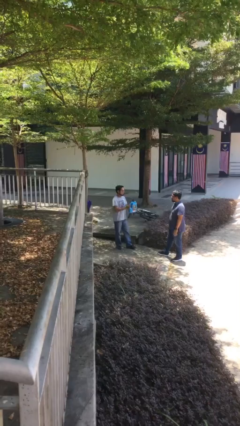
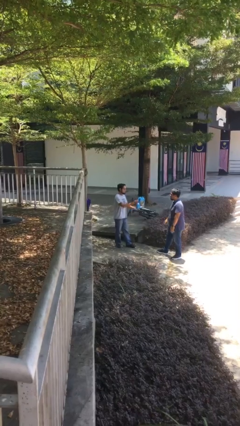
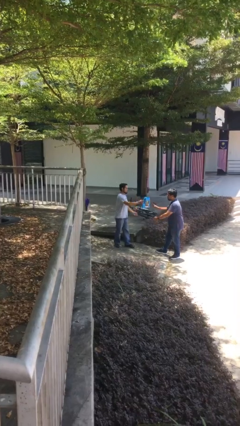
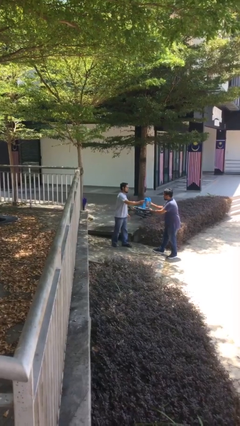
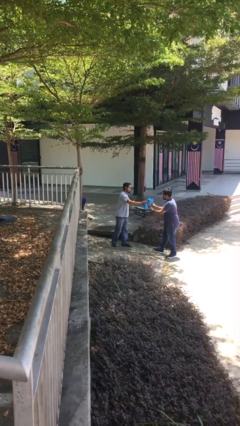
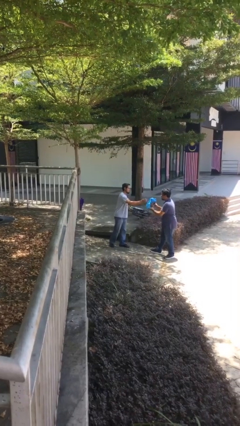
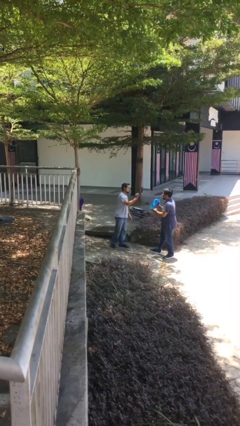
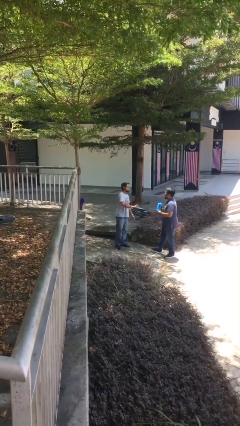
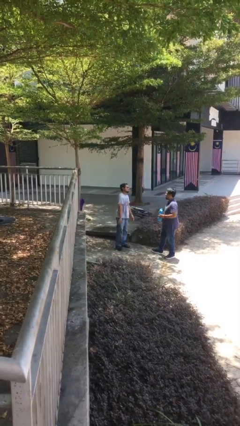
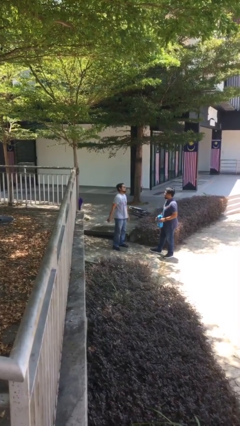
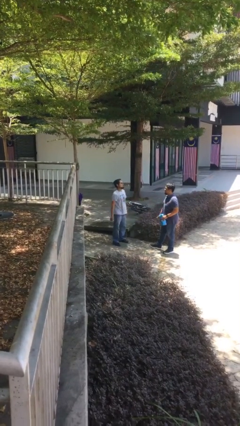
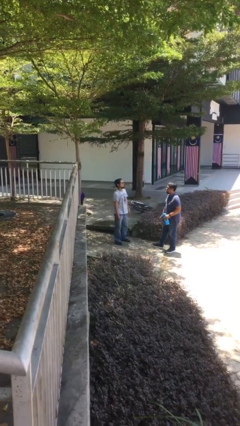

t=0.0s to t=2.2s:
person transfers object to person

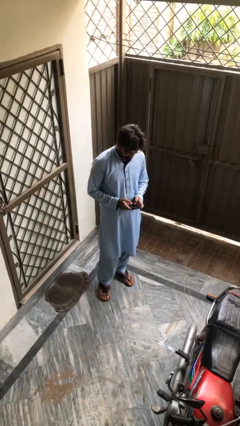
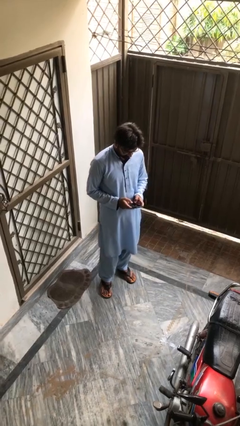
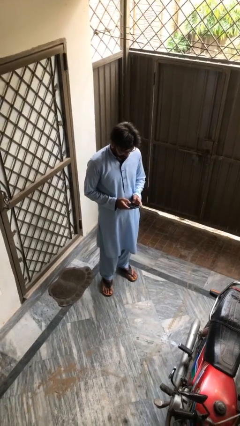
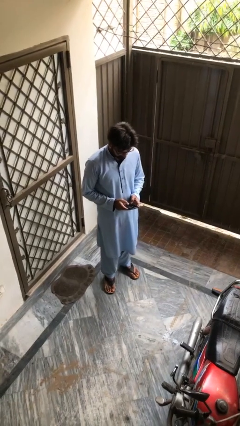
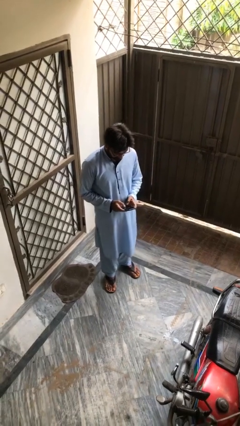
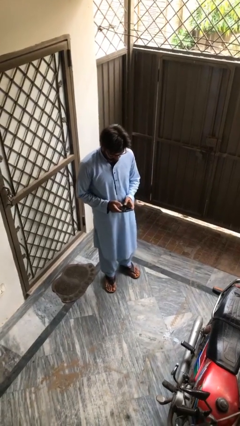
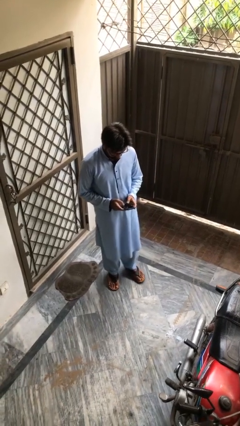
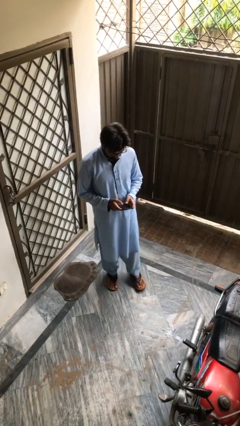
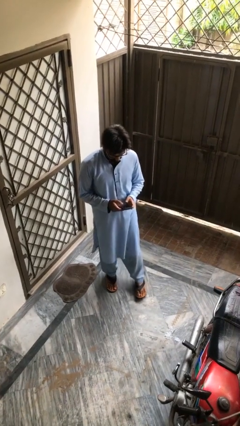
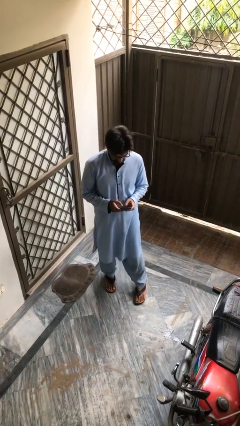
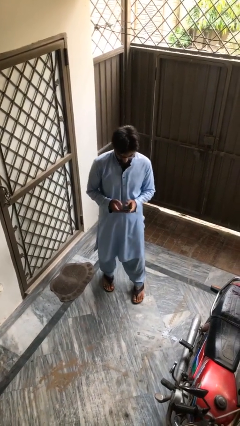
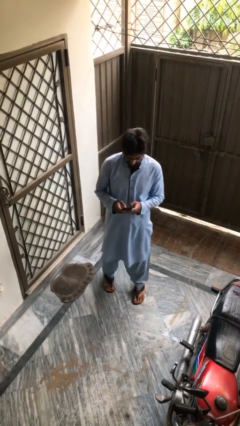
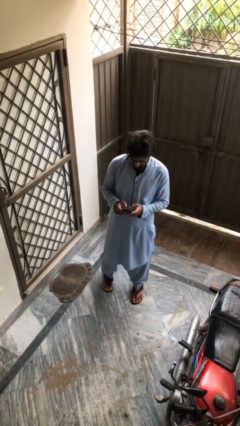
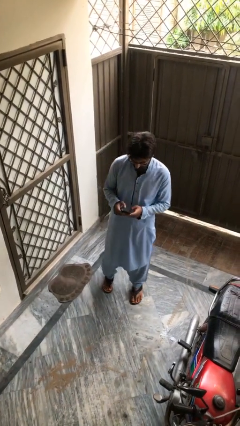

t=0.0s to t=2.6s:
person texts on phone

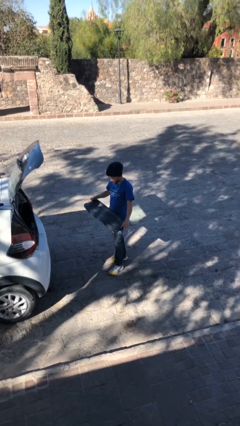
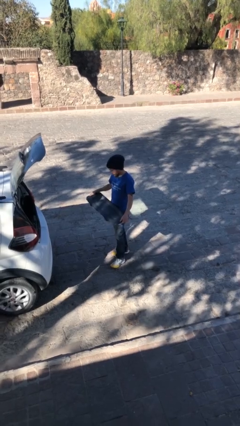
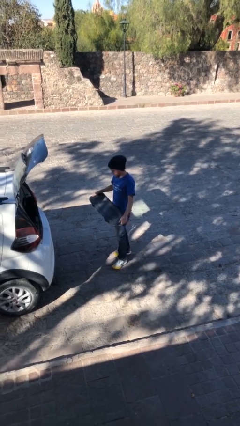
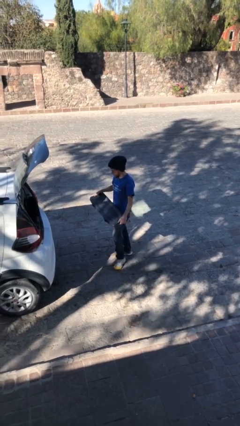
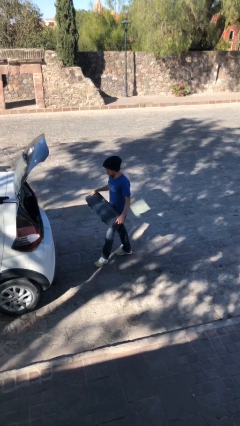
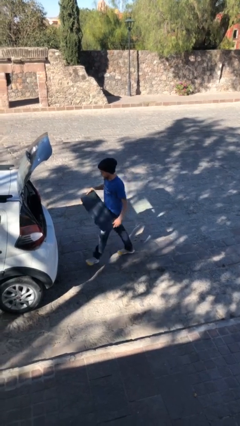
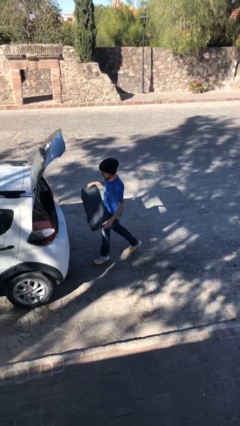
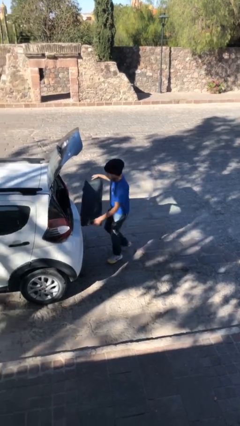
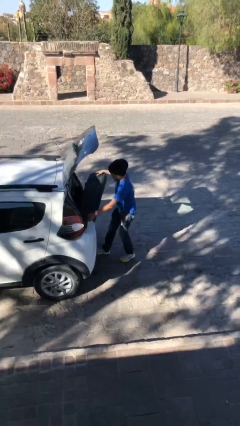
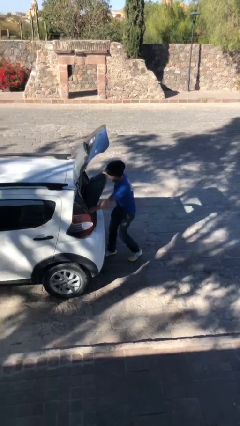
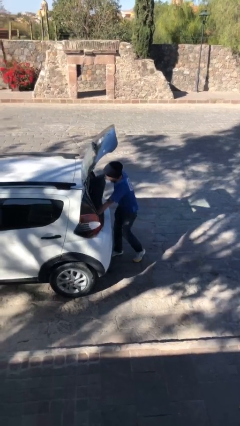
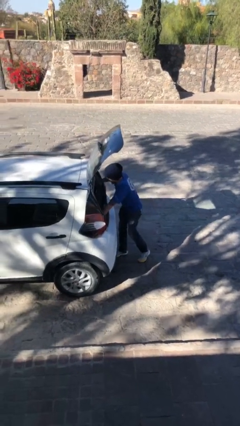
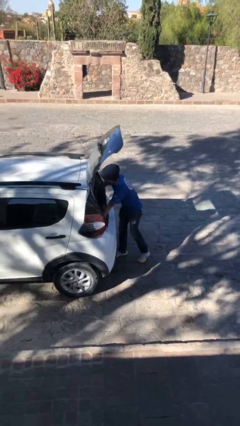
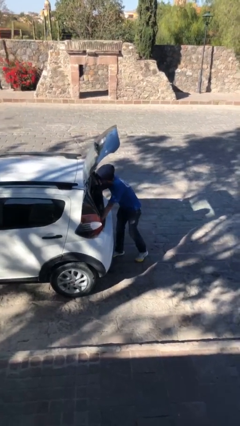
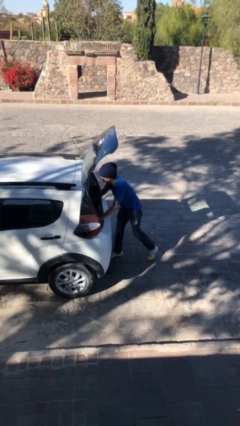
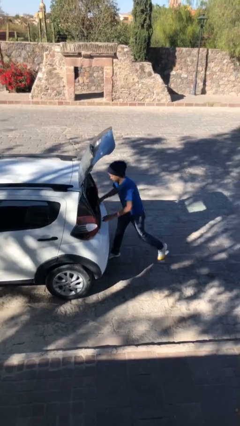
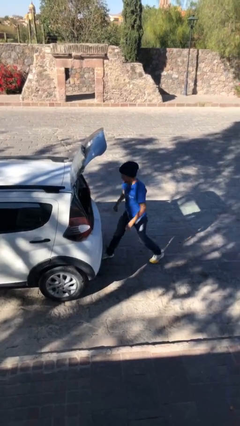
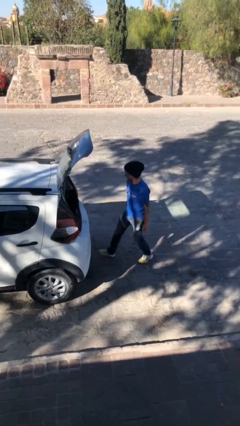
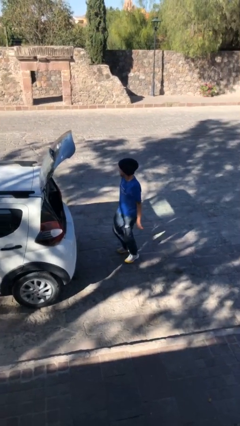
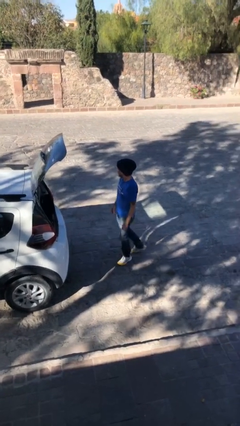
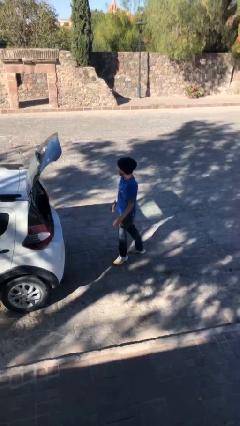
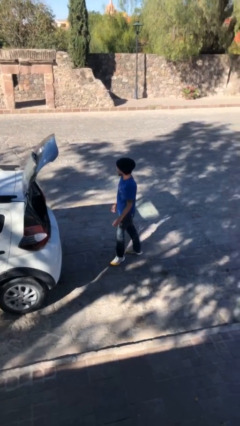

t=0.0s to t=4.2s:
person loads car

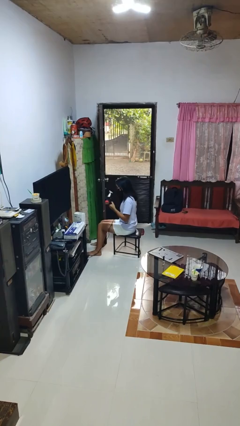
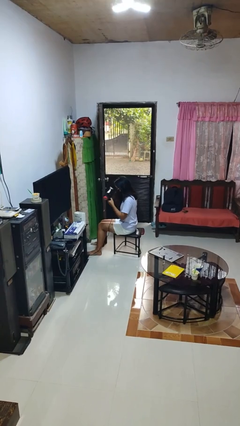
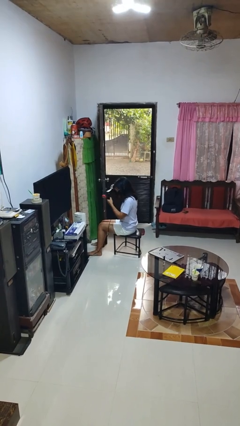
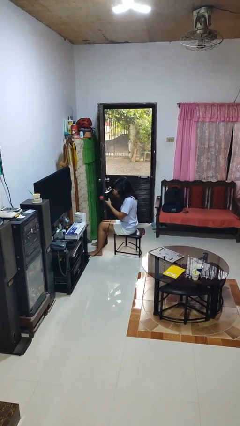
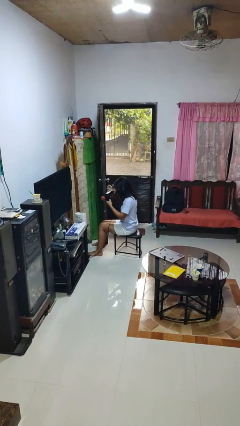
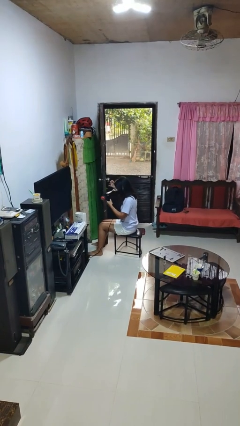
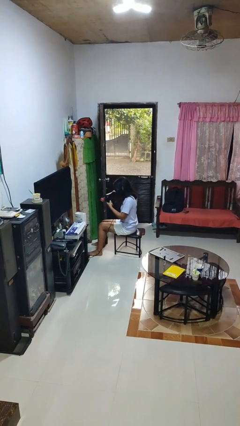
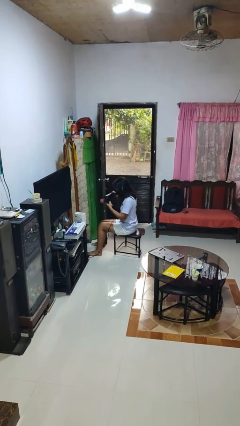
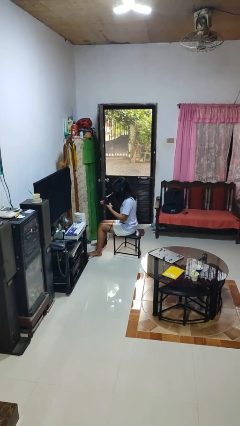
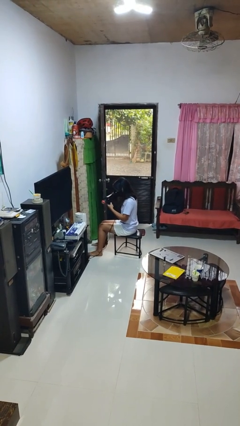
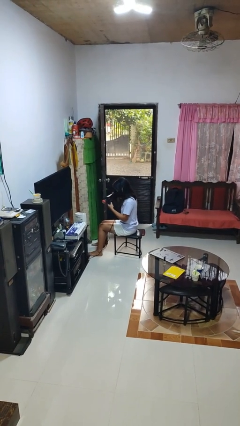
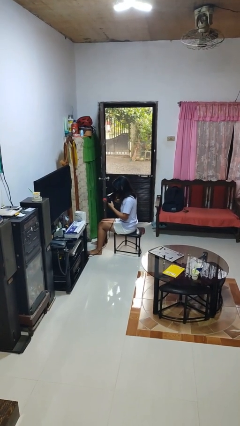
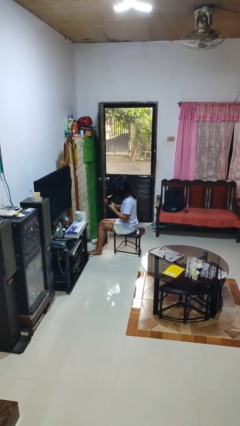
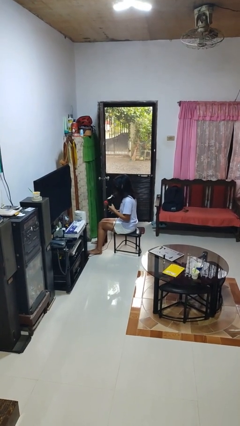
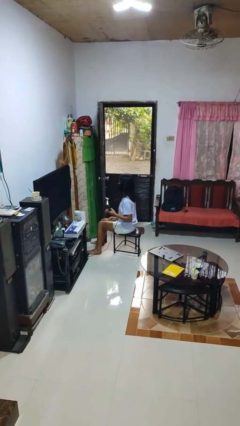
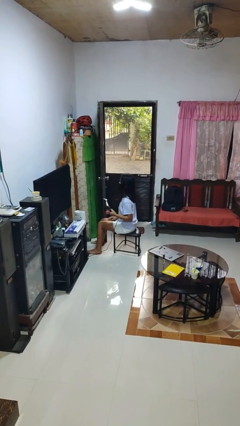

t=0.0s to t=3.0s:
person dries hair with hairdryer

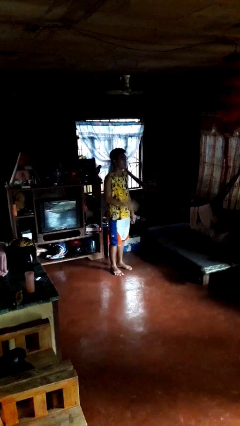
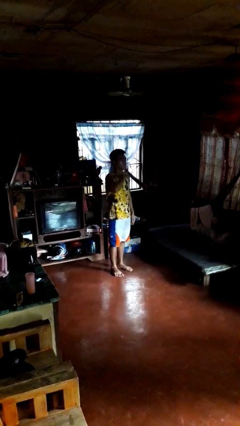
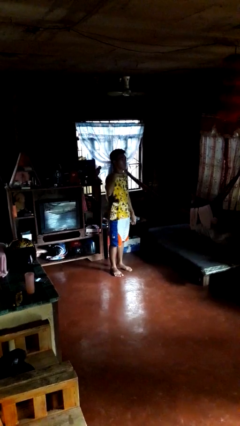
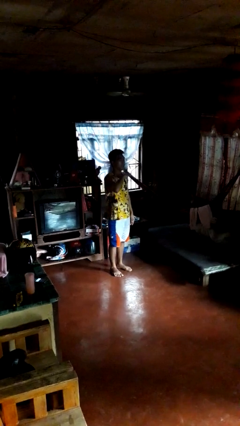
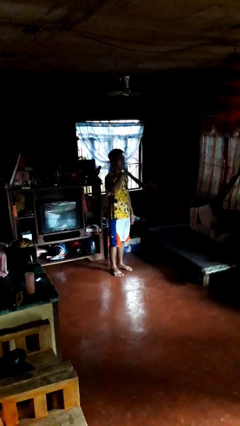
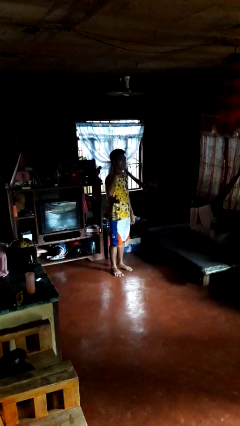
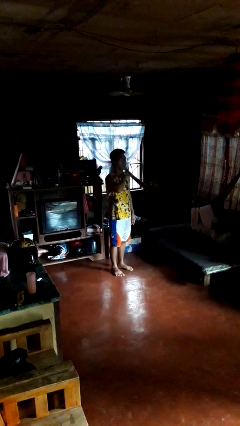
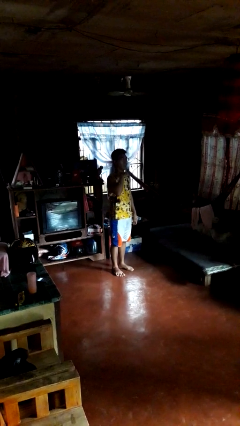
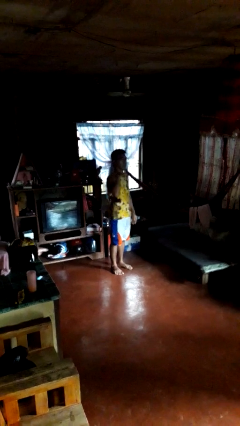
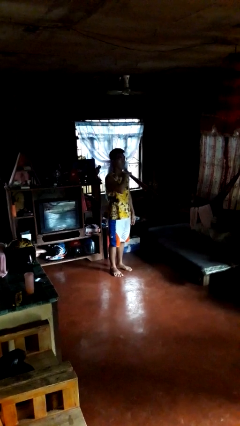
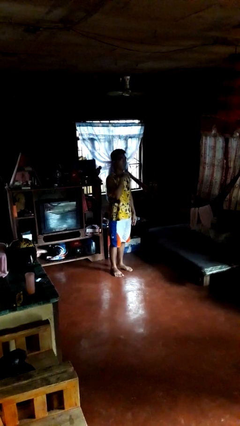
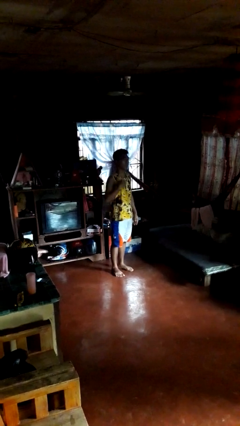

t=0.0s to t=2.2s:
person gestures cut

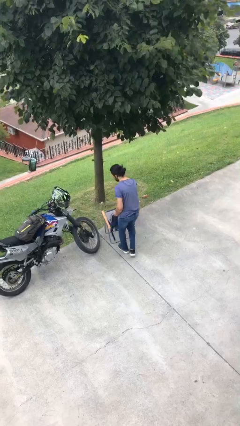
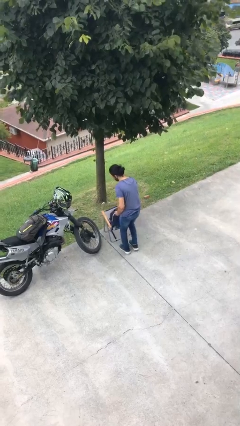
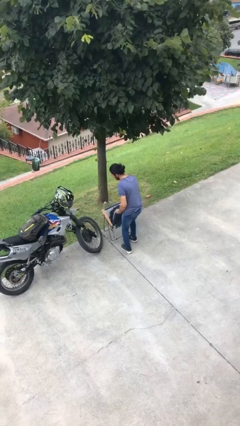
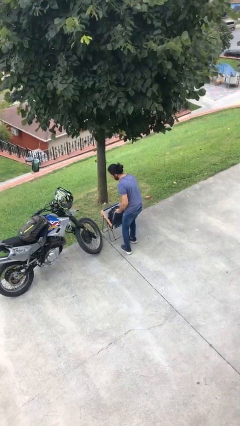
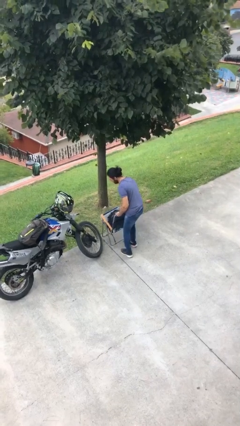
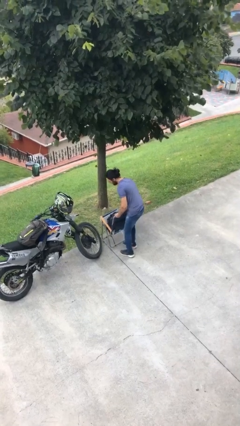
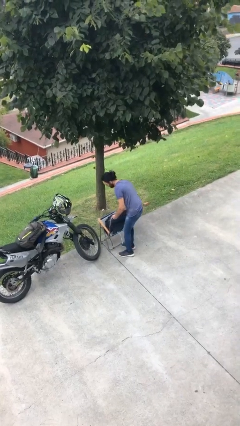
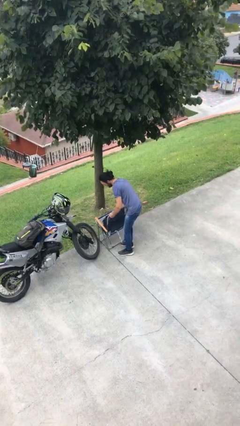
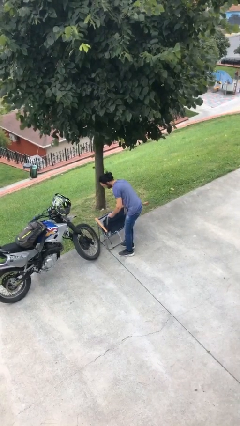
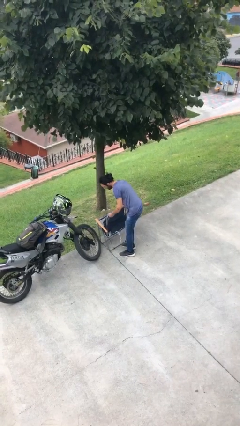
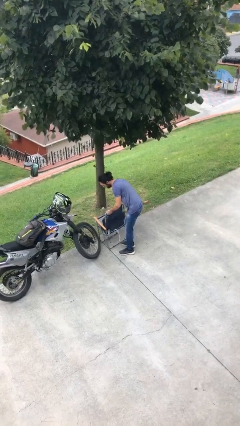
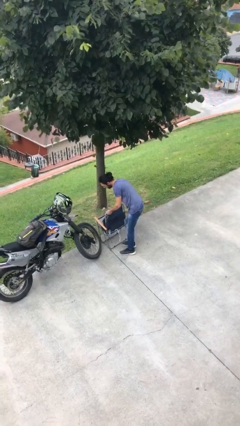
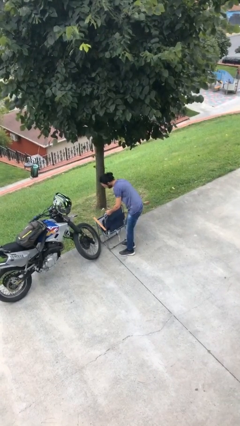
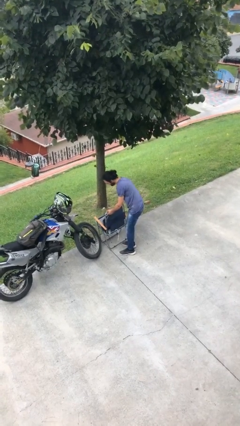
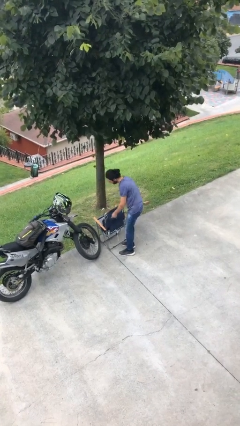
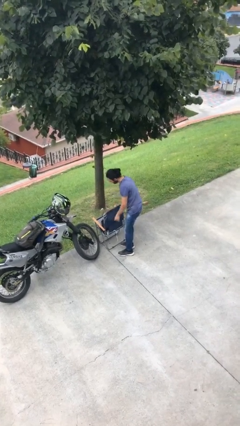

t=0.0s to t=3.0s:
person puts down object on floor

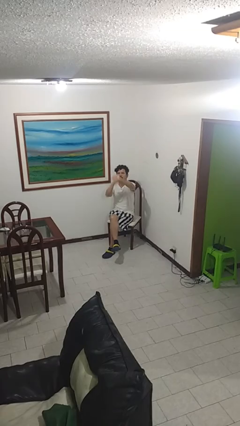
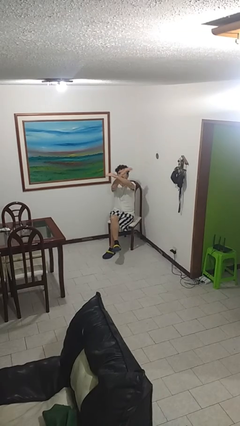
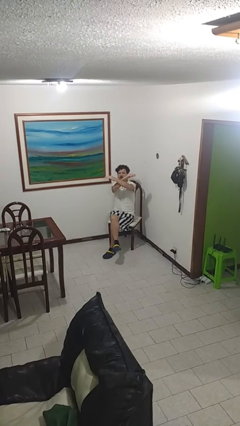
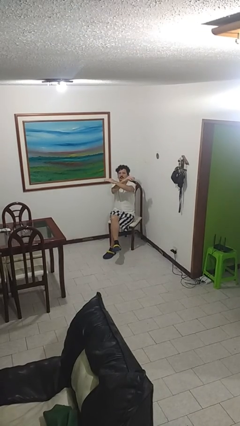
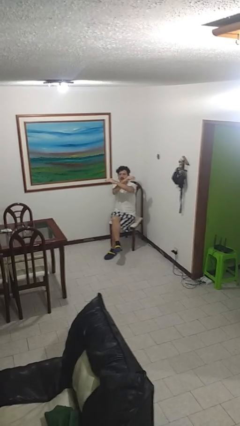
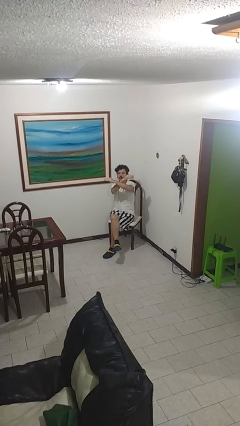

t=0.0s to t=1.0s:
person gestures arms x
